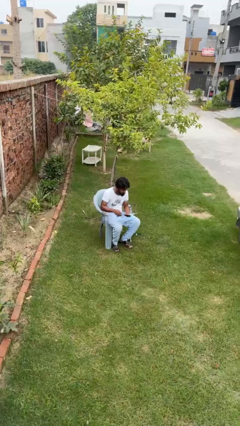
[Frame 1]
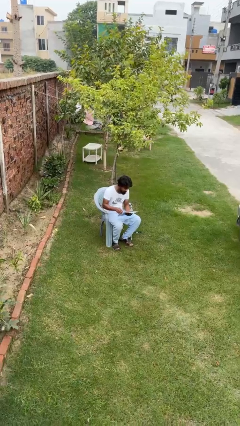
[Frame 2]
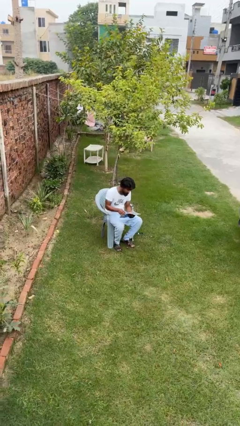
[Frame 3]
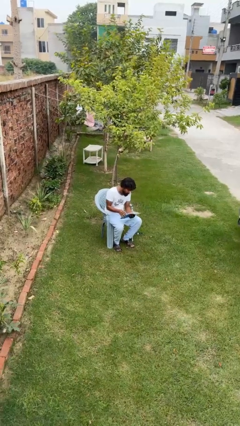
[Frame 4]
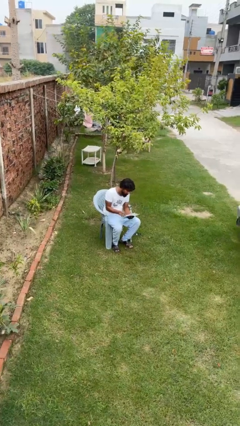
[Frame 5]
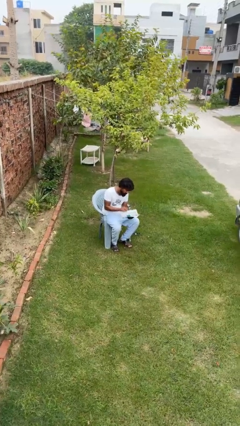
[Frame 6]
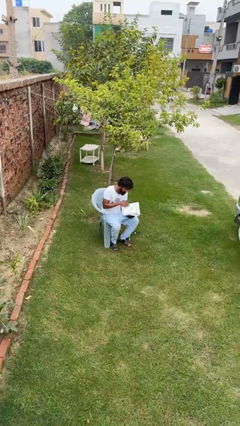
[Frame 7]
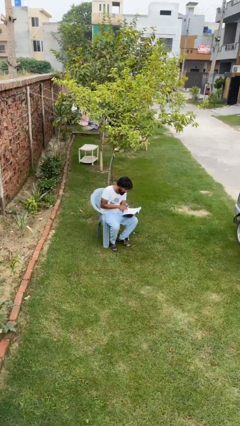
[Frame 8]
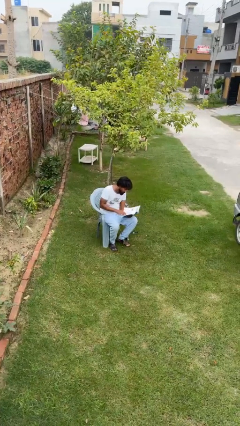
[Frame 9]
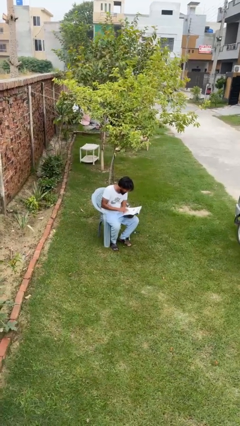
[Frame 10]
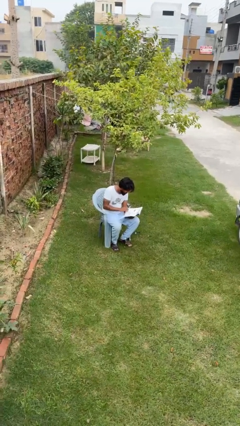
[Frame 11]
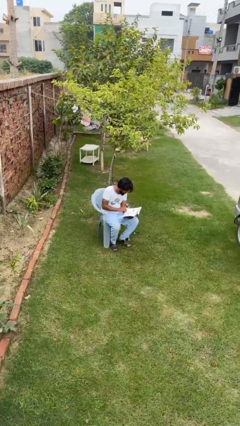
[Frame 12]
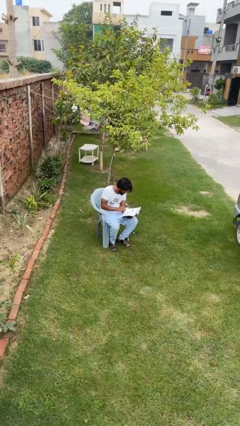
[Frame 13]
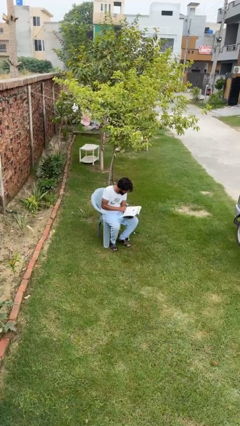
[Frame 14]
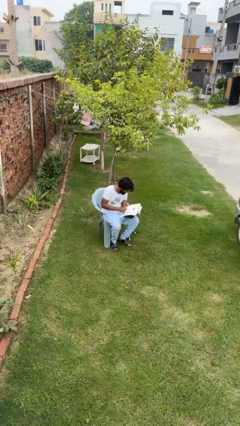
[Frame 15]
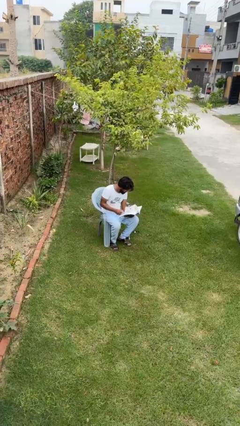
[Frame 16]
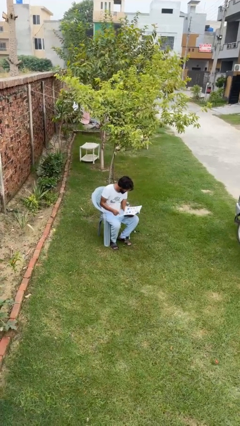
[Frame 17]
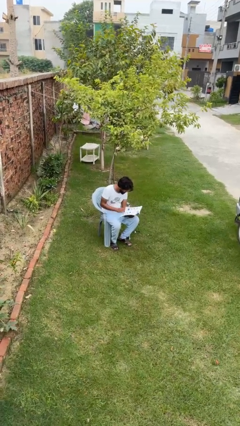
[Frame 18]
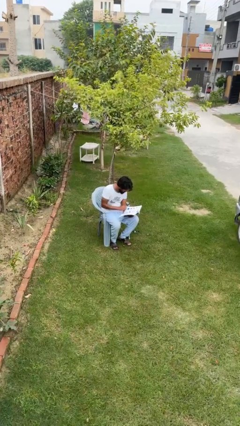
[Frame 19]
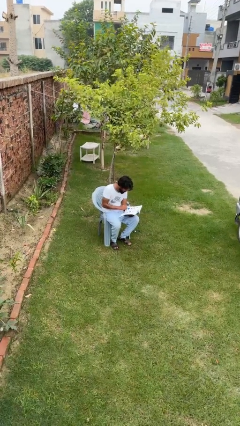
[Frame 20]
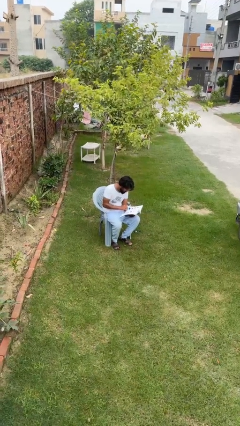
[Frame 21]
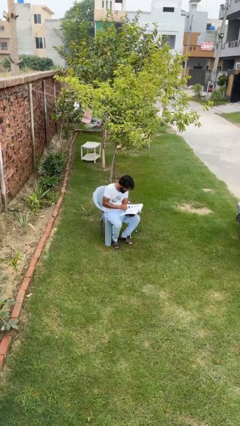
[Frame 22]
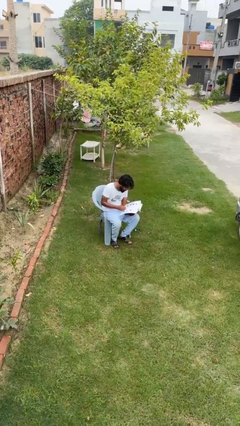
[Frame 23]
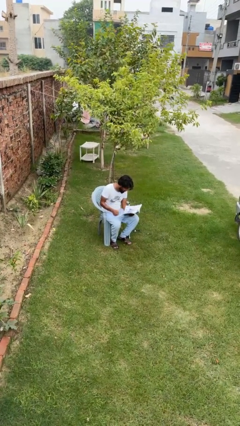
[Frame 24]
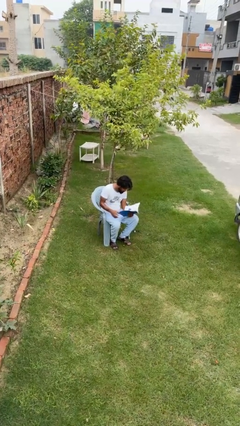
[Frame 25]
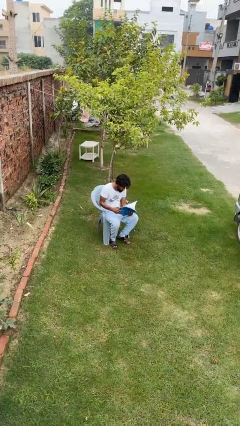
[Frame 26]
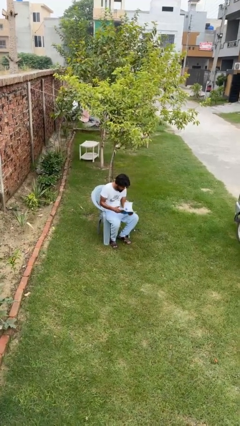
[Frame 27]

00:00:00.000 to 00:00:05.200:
person reads book

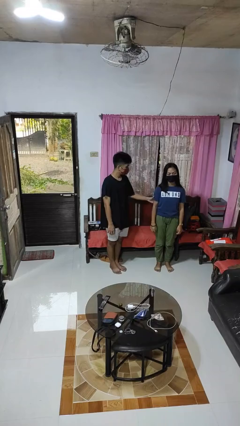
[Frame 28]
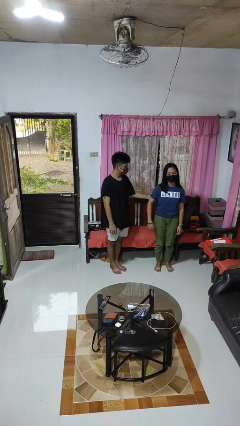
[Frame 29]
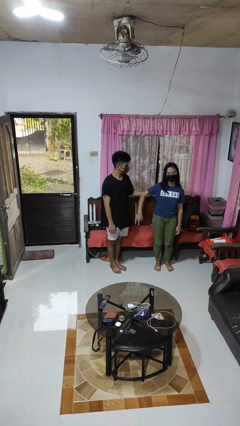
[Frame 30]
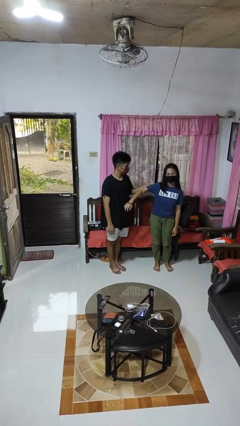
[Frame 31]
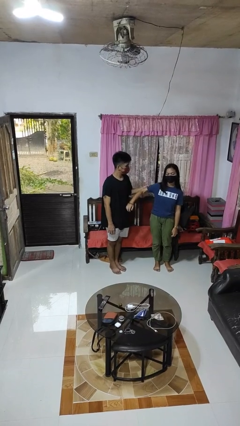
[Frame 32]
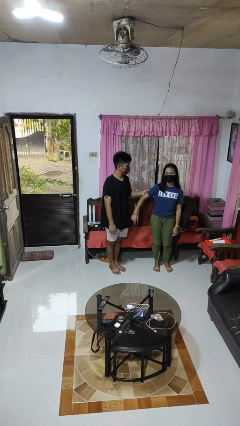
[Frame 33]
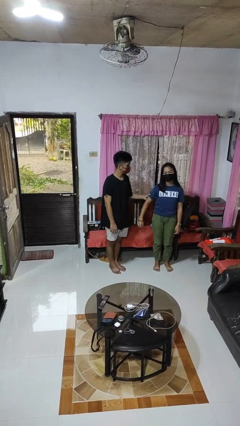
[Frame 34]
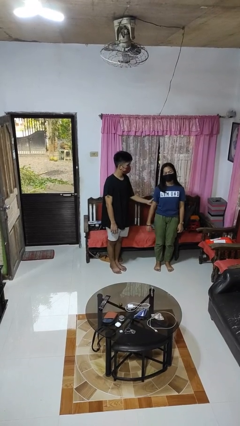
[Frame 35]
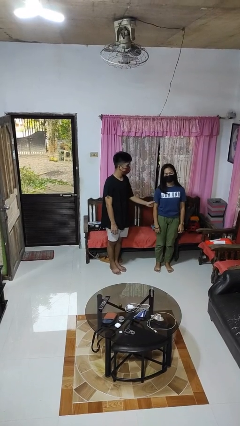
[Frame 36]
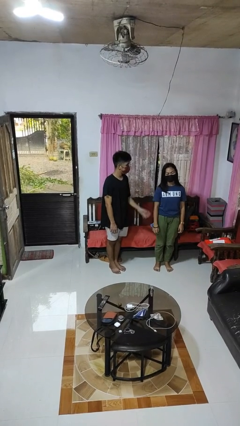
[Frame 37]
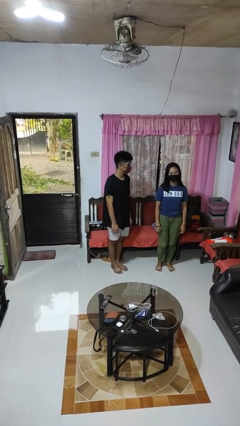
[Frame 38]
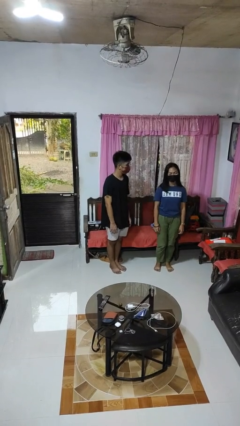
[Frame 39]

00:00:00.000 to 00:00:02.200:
person grabs person by bicep

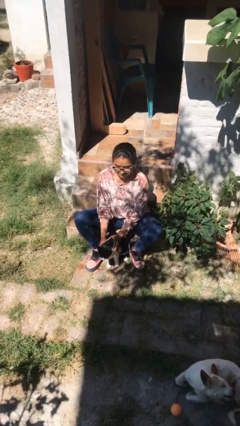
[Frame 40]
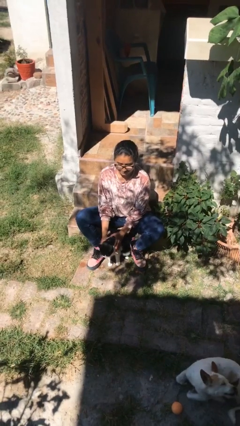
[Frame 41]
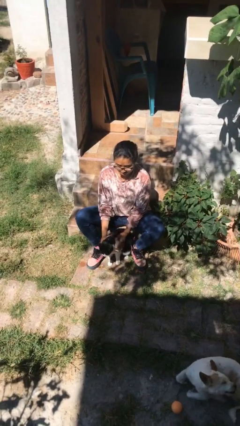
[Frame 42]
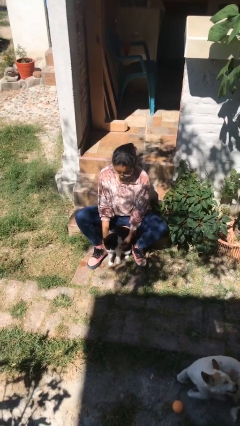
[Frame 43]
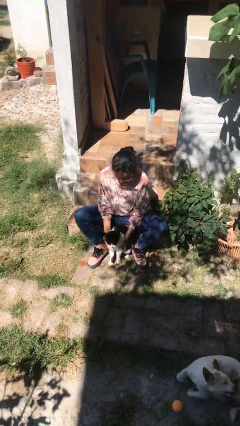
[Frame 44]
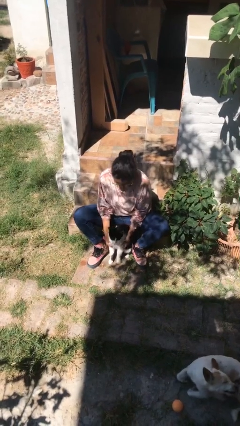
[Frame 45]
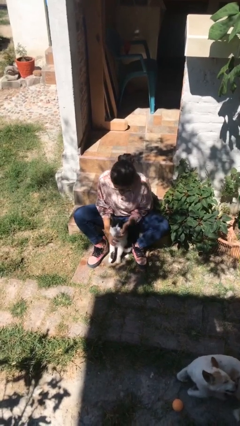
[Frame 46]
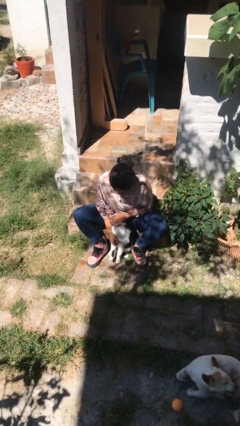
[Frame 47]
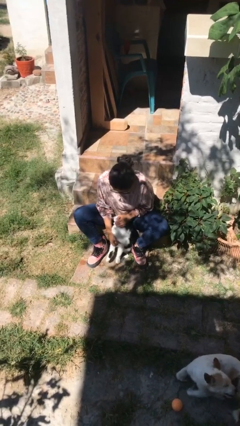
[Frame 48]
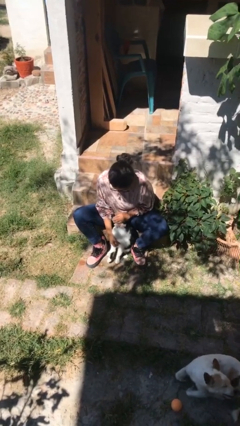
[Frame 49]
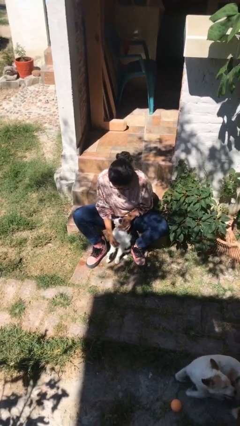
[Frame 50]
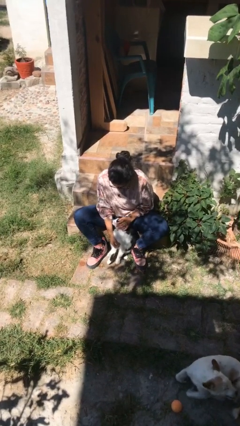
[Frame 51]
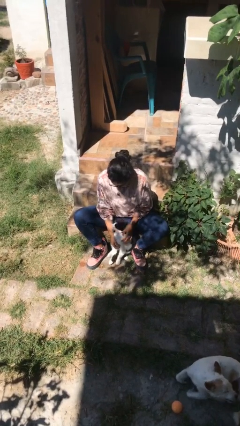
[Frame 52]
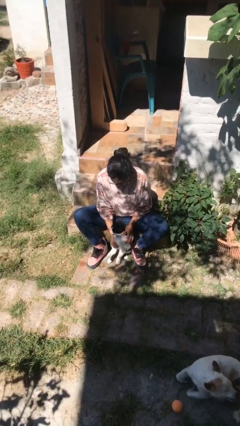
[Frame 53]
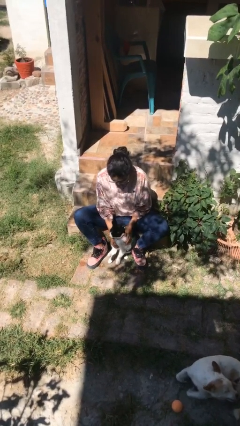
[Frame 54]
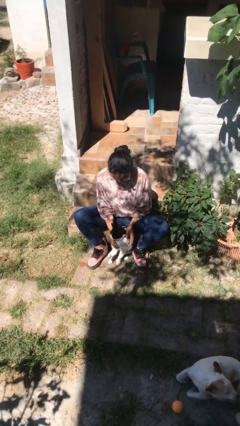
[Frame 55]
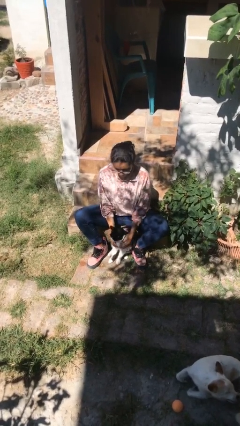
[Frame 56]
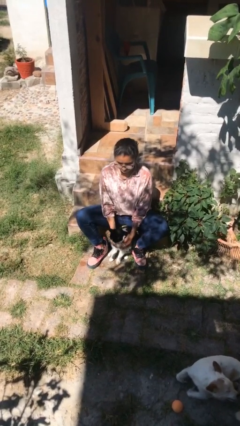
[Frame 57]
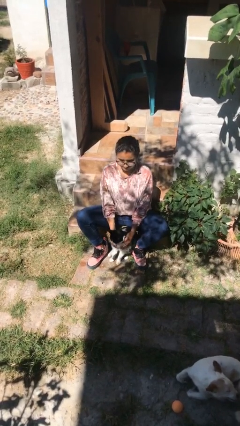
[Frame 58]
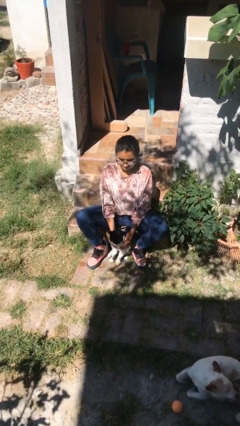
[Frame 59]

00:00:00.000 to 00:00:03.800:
person pets cat

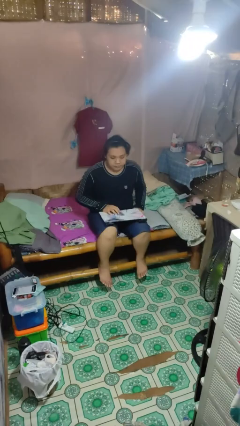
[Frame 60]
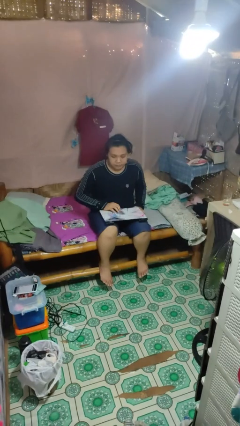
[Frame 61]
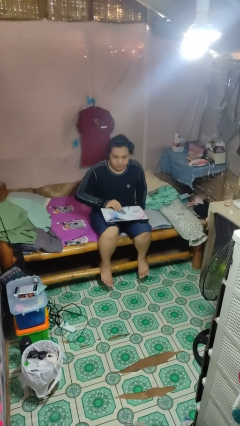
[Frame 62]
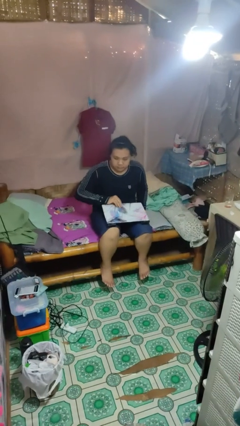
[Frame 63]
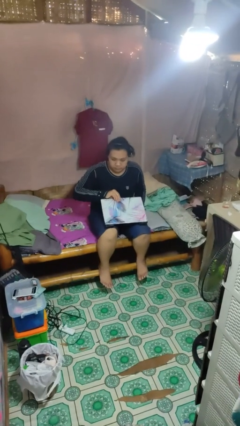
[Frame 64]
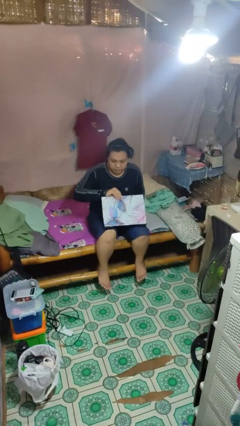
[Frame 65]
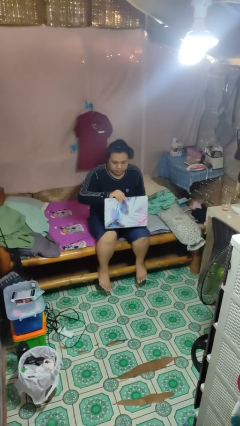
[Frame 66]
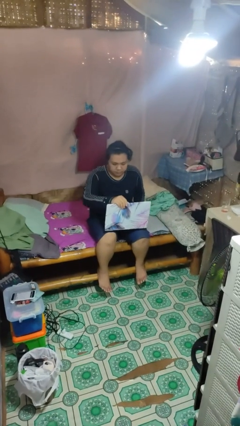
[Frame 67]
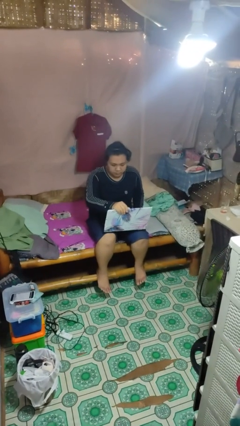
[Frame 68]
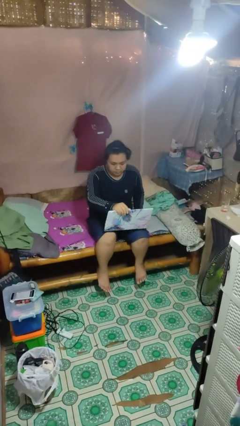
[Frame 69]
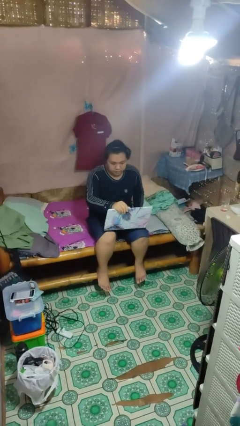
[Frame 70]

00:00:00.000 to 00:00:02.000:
person opens laptop

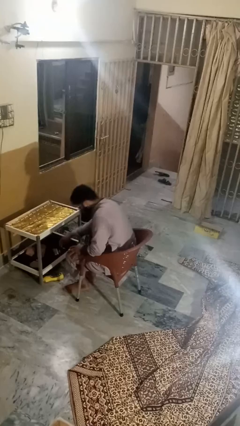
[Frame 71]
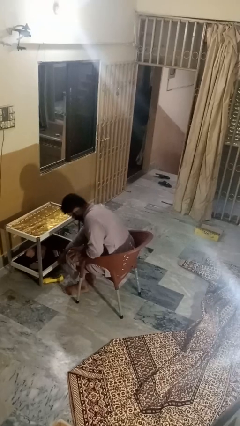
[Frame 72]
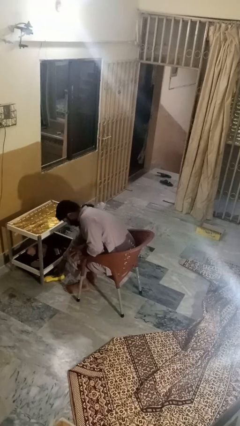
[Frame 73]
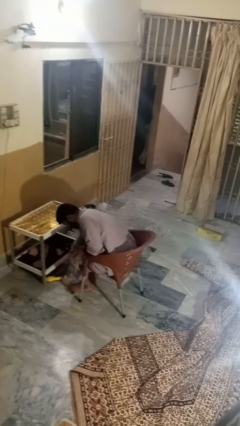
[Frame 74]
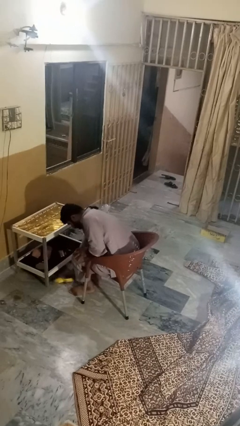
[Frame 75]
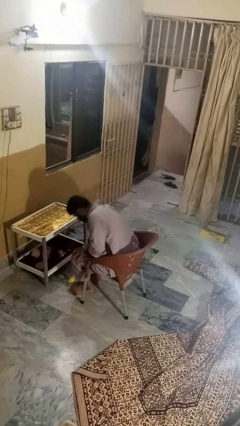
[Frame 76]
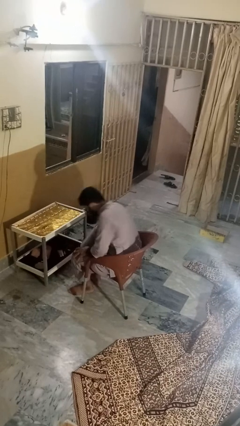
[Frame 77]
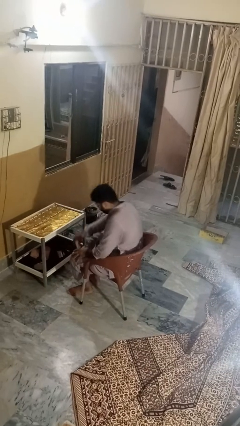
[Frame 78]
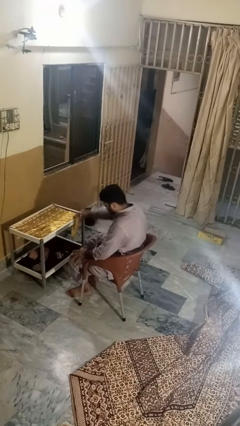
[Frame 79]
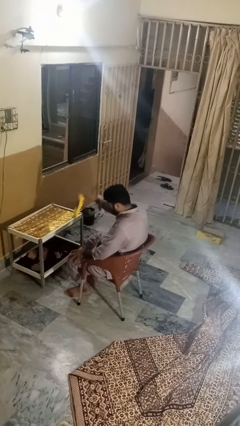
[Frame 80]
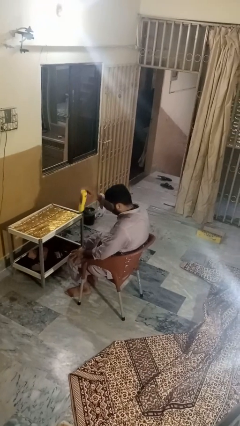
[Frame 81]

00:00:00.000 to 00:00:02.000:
person picks up object from floor

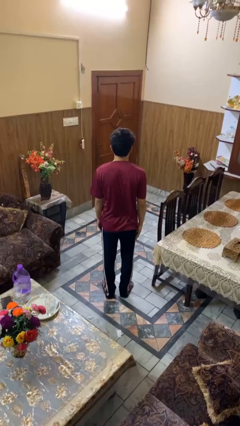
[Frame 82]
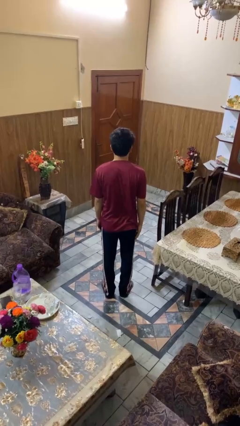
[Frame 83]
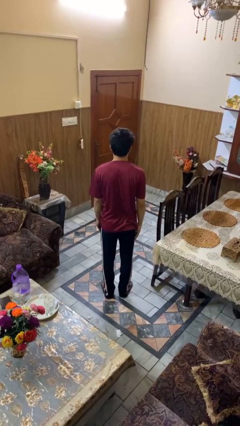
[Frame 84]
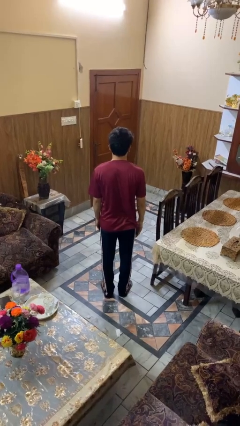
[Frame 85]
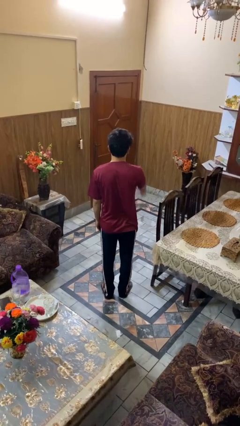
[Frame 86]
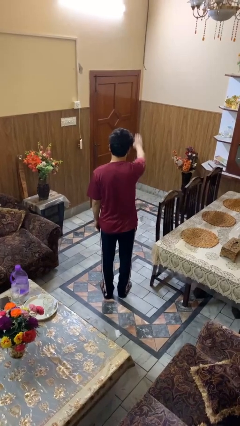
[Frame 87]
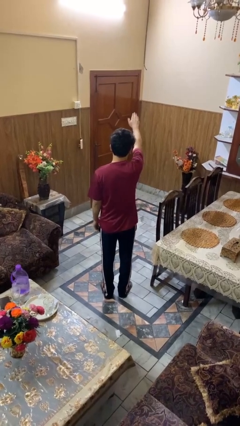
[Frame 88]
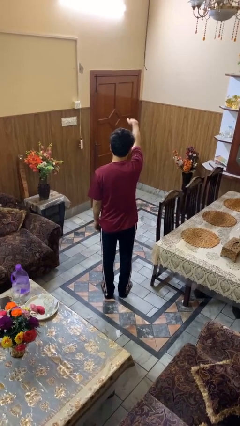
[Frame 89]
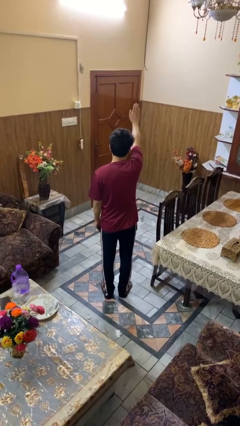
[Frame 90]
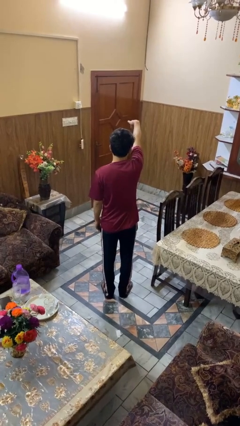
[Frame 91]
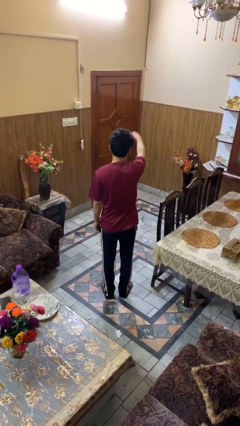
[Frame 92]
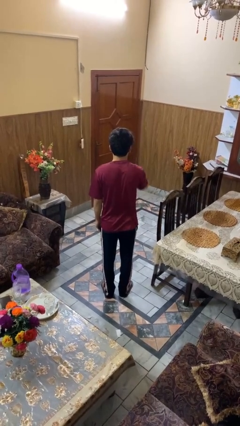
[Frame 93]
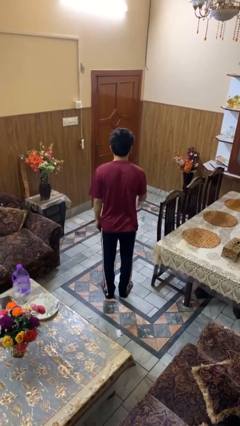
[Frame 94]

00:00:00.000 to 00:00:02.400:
person gestures come here
